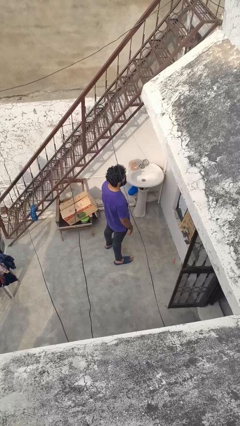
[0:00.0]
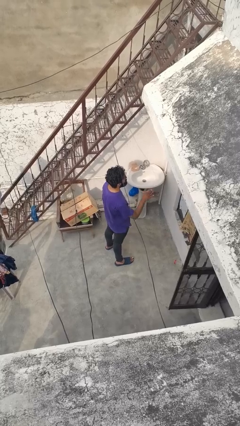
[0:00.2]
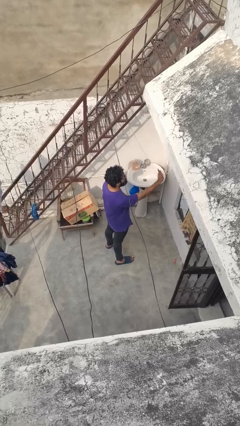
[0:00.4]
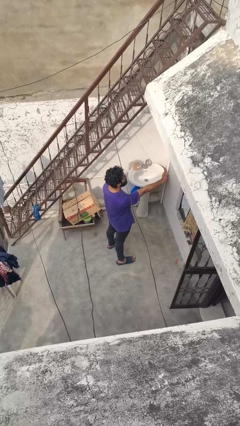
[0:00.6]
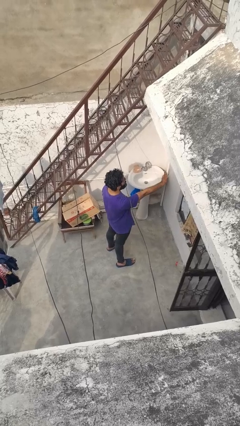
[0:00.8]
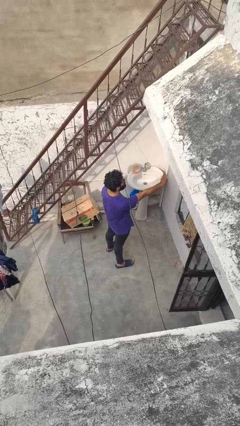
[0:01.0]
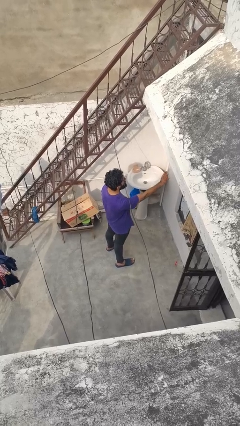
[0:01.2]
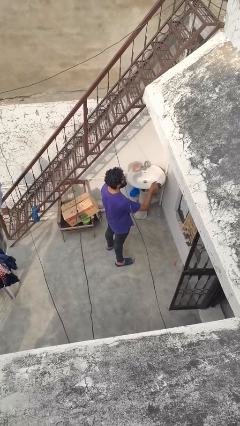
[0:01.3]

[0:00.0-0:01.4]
person gestures stop

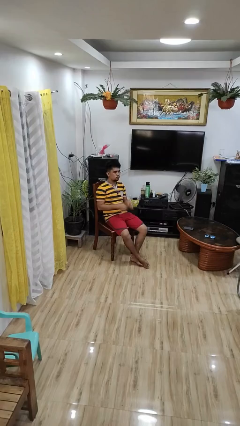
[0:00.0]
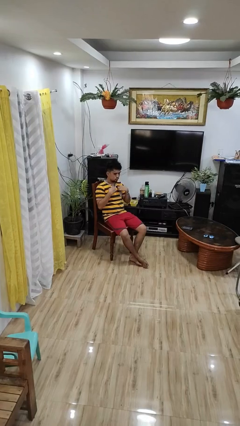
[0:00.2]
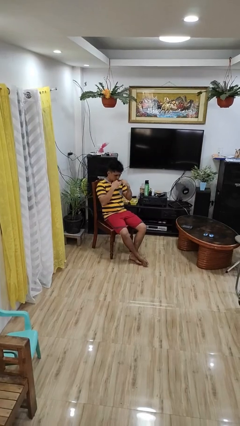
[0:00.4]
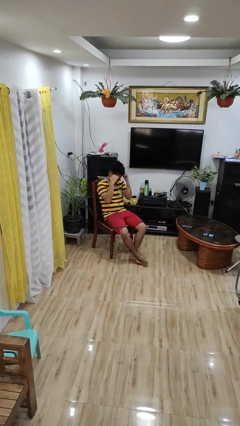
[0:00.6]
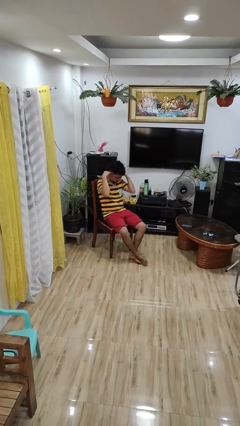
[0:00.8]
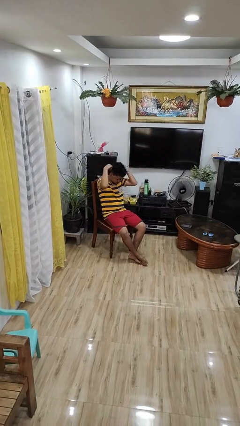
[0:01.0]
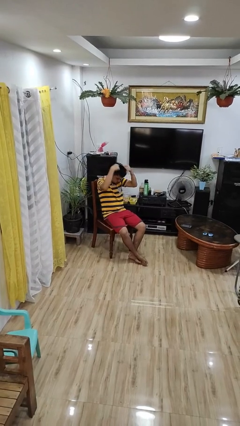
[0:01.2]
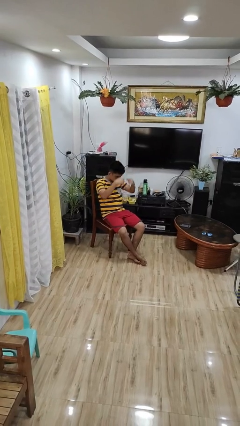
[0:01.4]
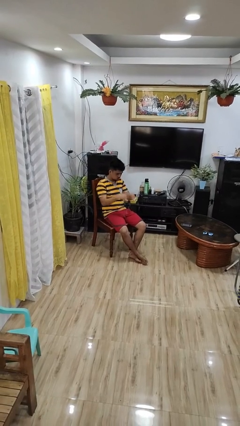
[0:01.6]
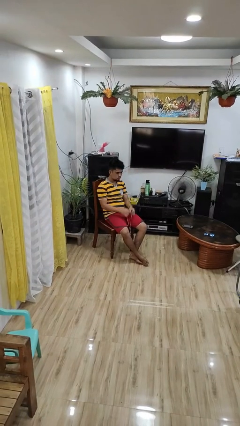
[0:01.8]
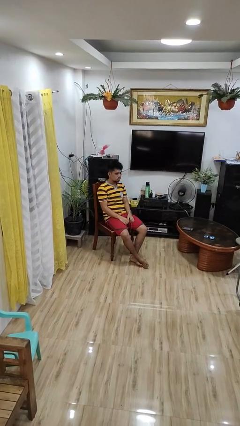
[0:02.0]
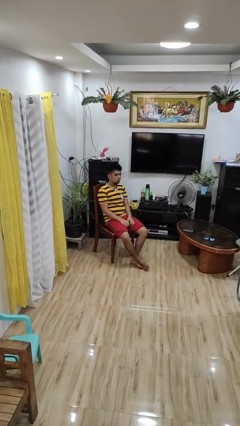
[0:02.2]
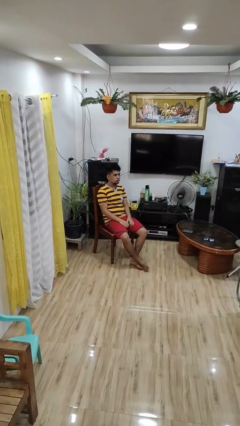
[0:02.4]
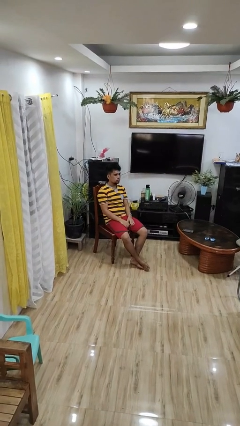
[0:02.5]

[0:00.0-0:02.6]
person takes off necklace

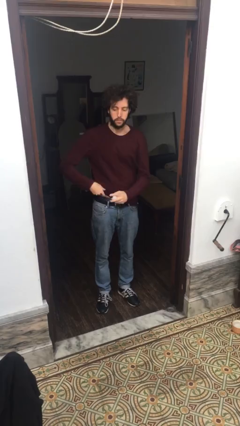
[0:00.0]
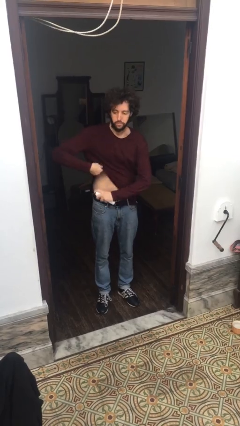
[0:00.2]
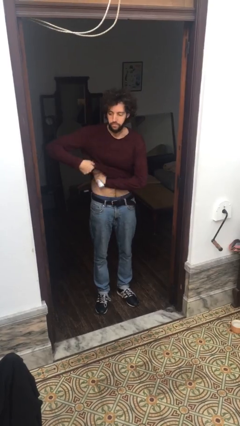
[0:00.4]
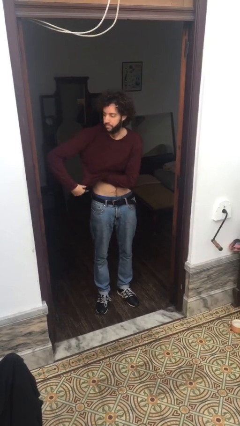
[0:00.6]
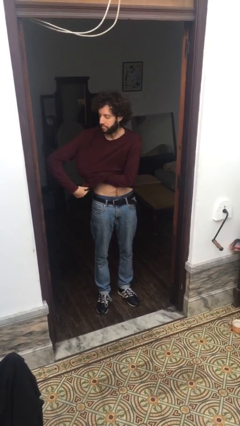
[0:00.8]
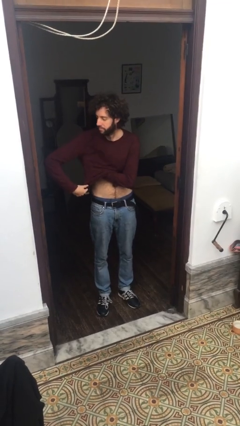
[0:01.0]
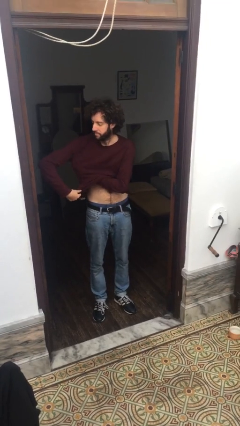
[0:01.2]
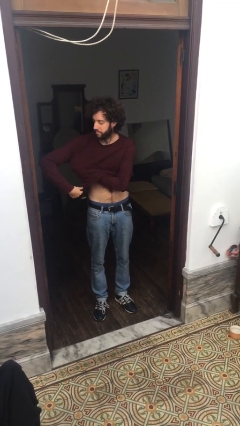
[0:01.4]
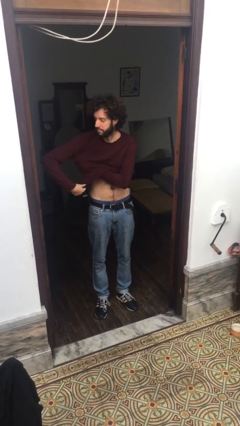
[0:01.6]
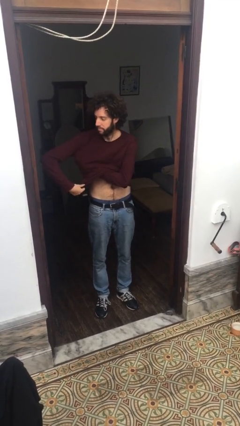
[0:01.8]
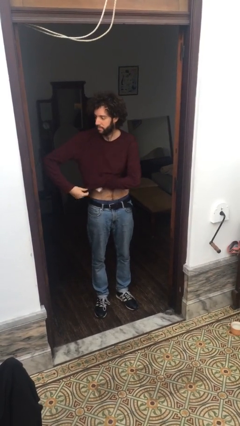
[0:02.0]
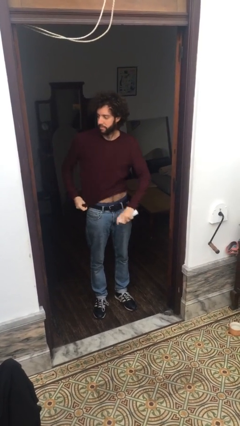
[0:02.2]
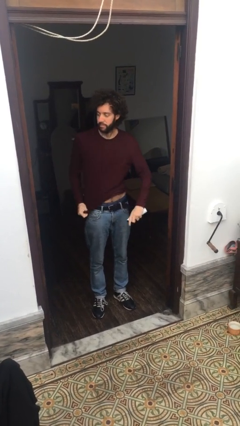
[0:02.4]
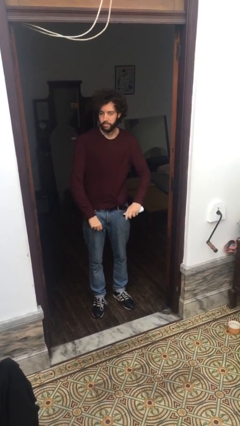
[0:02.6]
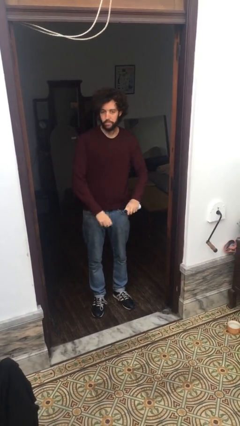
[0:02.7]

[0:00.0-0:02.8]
person applies deodorant

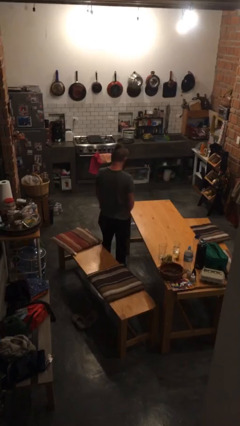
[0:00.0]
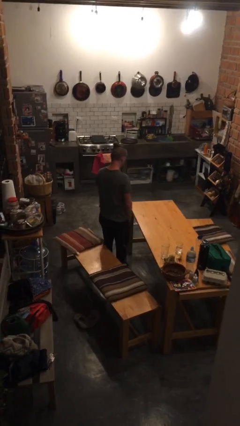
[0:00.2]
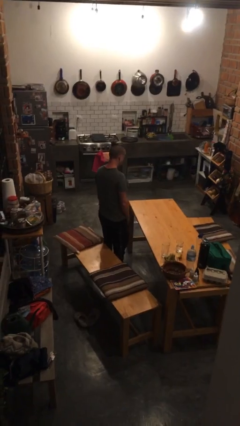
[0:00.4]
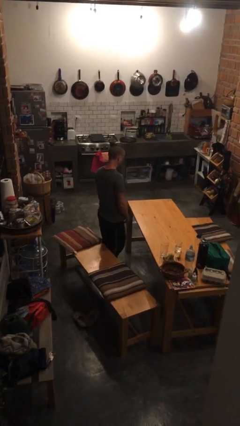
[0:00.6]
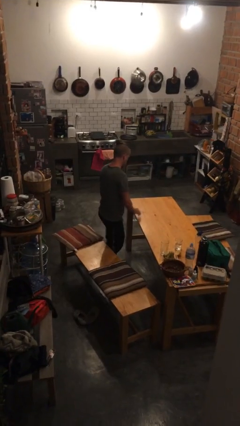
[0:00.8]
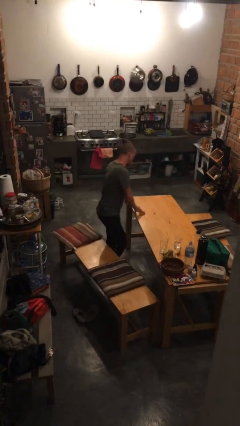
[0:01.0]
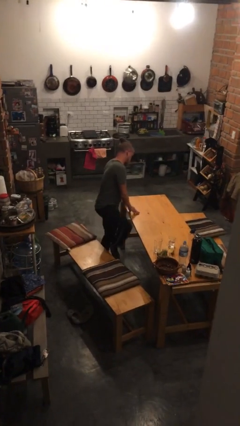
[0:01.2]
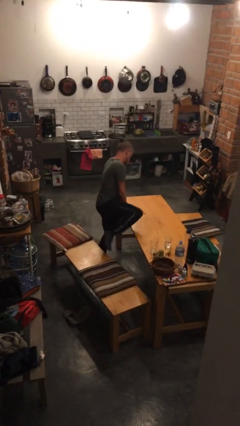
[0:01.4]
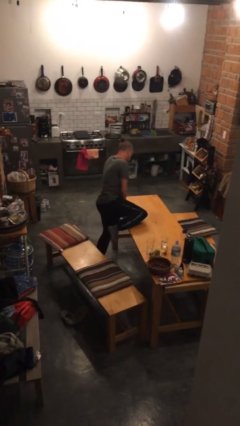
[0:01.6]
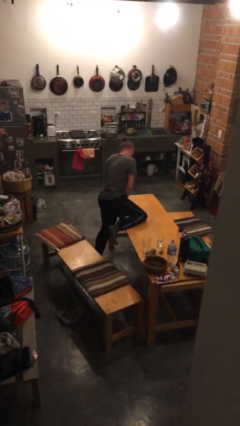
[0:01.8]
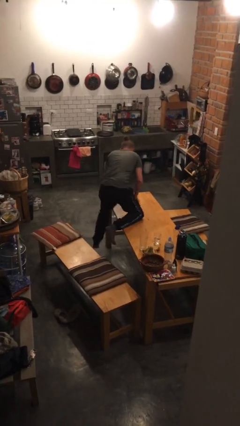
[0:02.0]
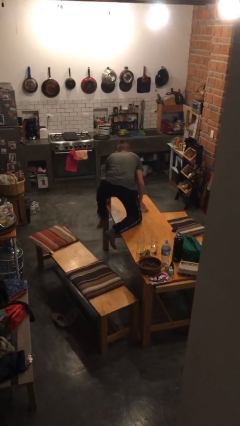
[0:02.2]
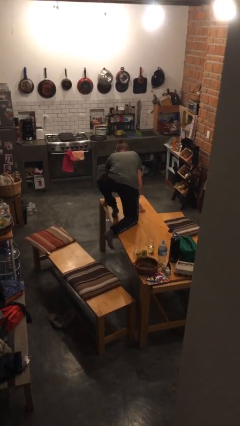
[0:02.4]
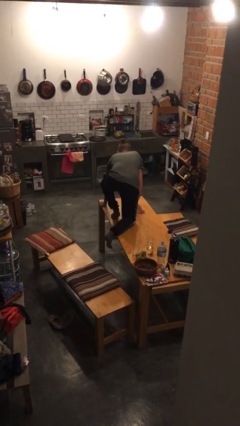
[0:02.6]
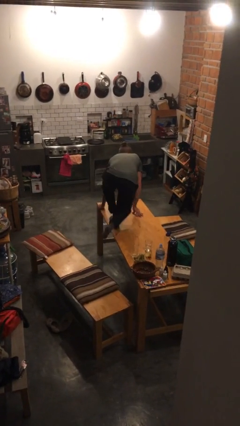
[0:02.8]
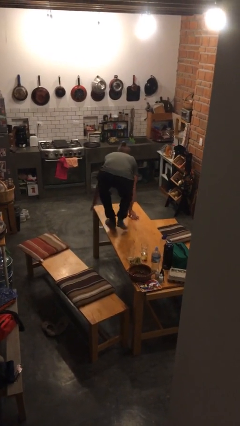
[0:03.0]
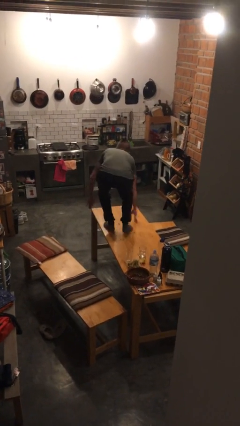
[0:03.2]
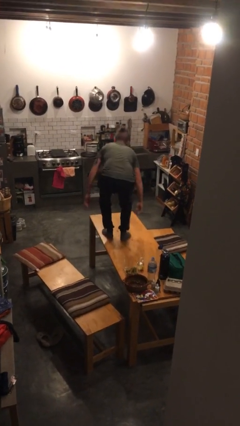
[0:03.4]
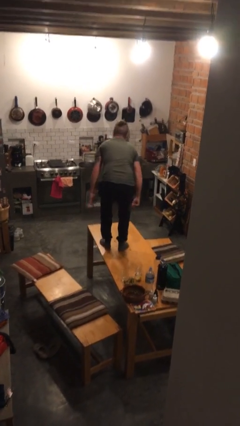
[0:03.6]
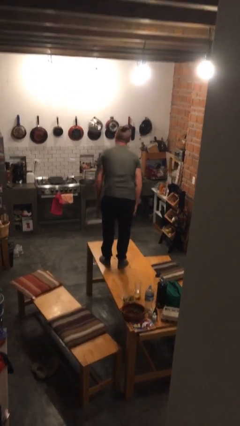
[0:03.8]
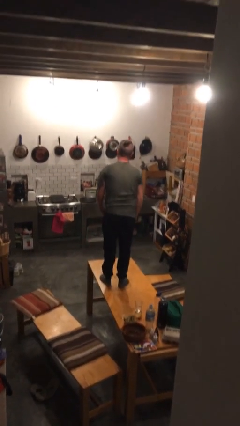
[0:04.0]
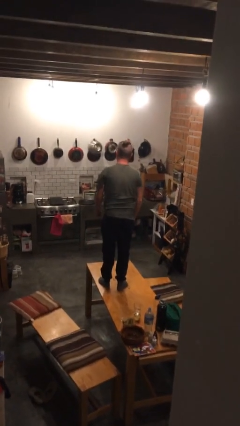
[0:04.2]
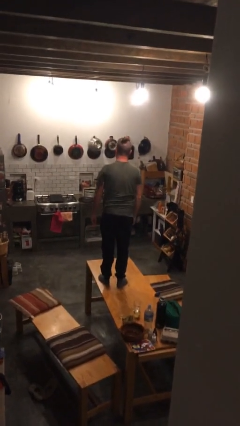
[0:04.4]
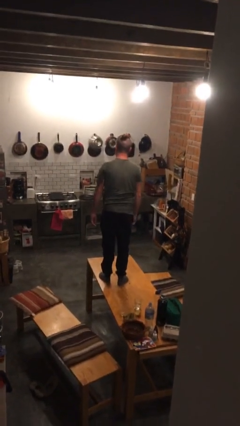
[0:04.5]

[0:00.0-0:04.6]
person climbs on table

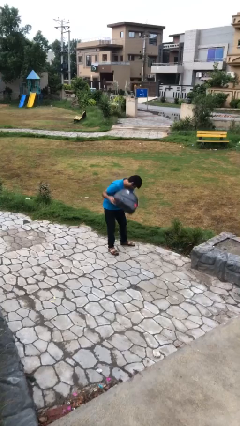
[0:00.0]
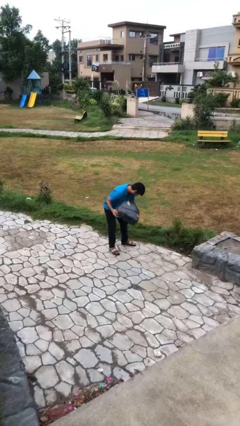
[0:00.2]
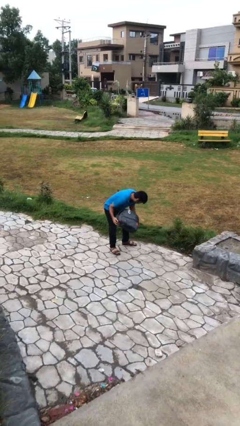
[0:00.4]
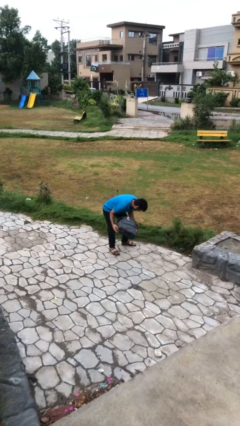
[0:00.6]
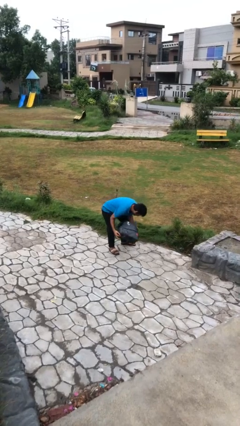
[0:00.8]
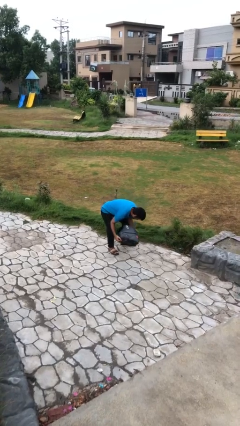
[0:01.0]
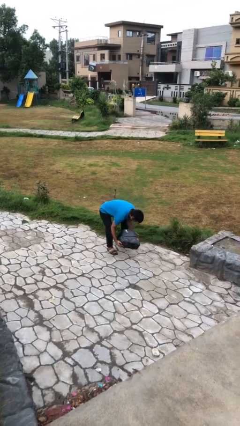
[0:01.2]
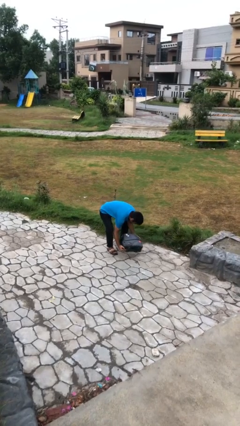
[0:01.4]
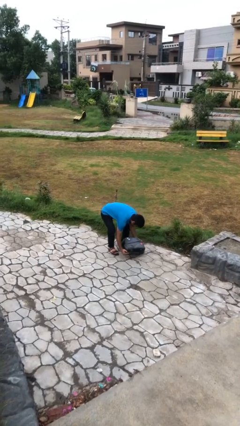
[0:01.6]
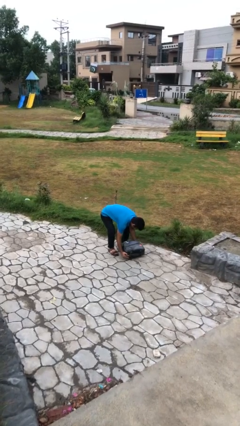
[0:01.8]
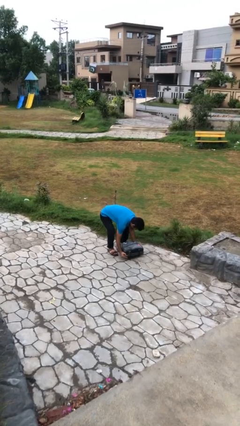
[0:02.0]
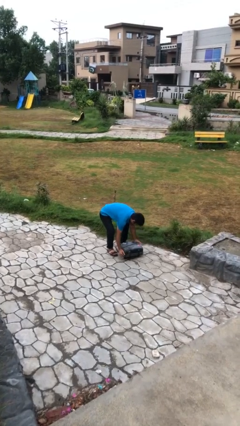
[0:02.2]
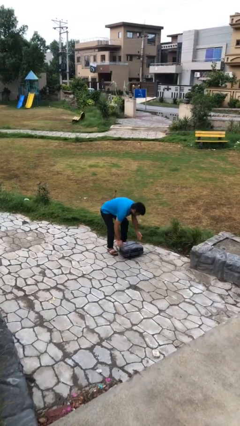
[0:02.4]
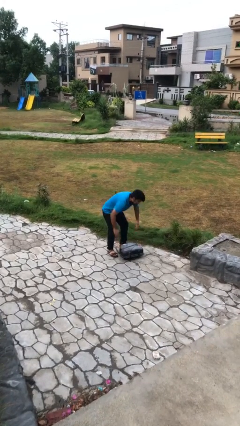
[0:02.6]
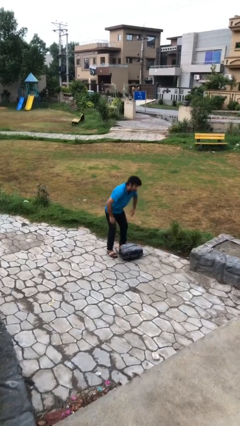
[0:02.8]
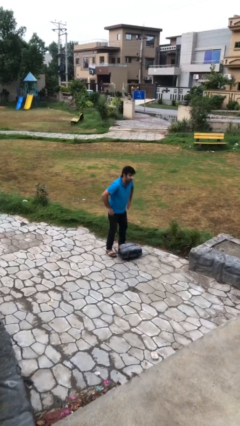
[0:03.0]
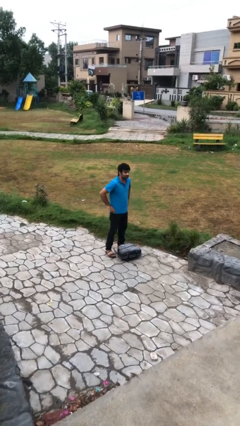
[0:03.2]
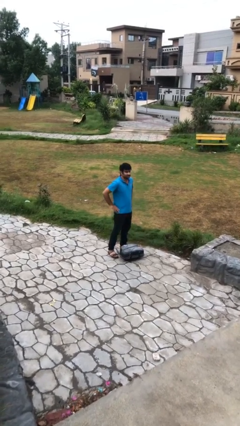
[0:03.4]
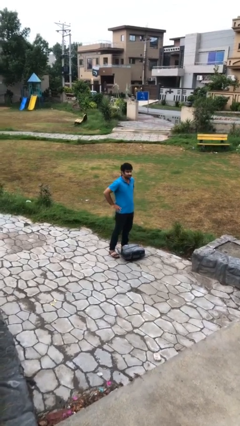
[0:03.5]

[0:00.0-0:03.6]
person puts down object on floor

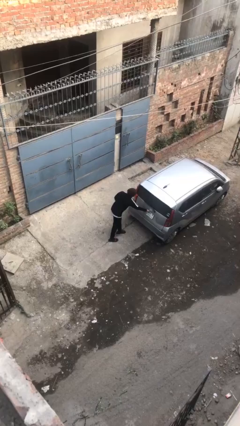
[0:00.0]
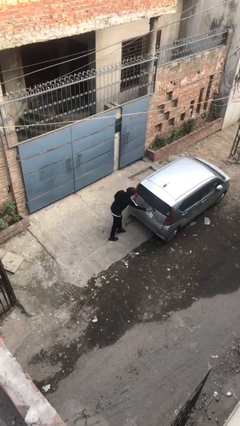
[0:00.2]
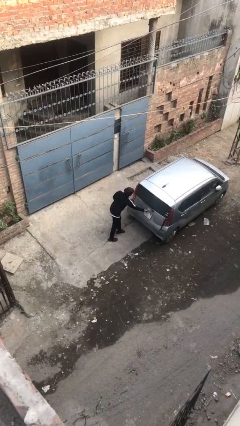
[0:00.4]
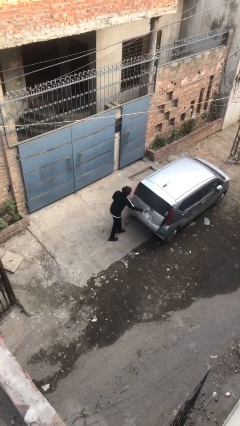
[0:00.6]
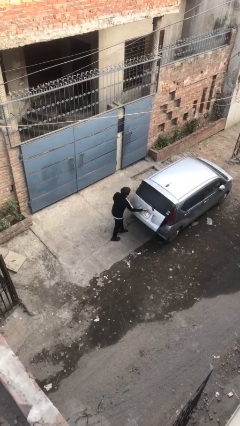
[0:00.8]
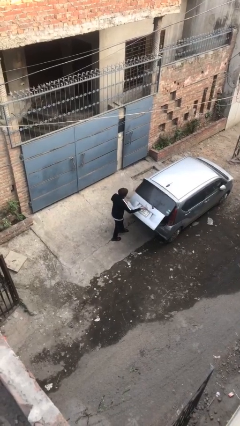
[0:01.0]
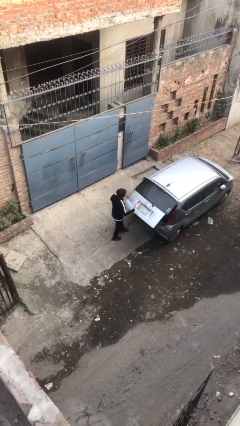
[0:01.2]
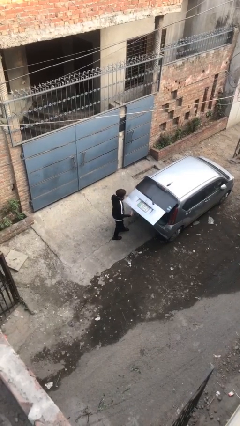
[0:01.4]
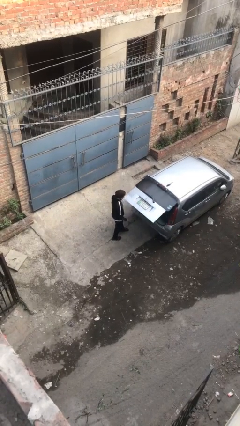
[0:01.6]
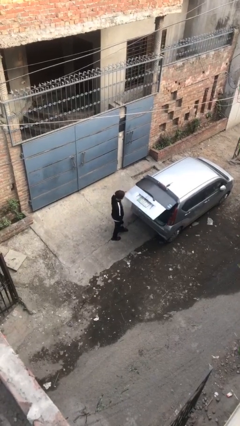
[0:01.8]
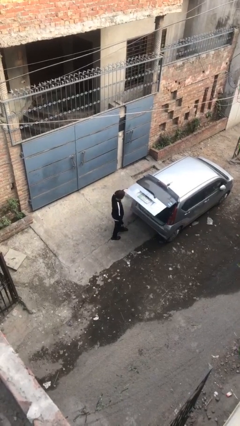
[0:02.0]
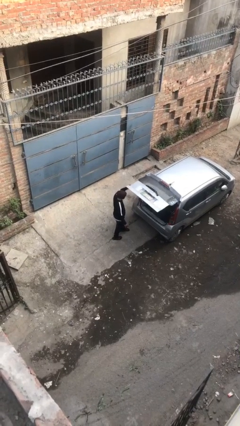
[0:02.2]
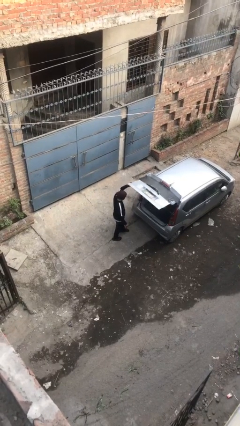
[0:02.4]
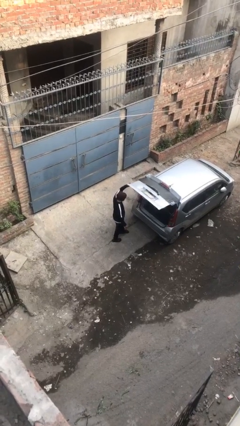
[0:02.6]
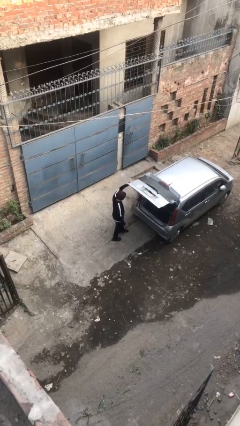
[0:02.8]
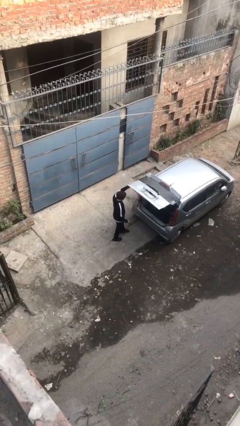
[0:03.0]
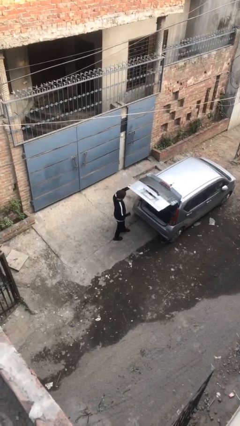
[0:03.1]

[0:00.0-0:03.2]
person opens car trunk
